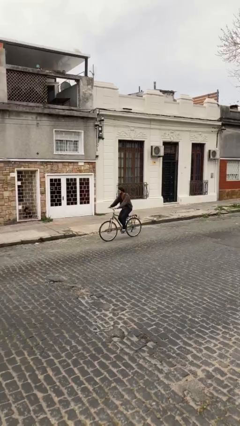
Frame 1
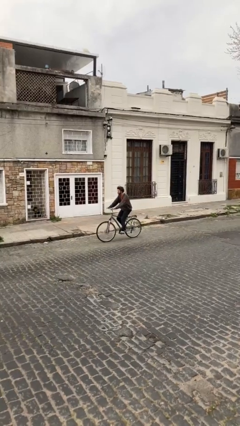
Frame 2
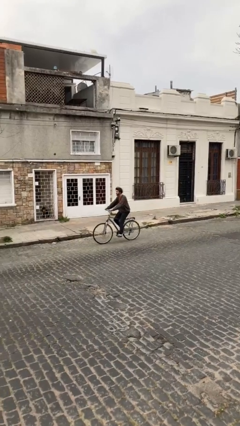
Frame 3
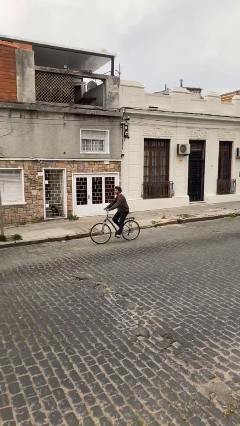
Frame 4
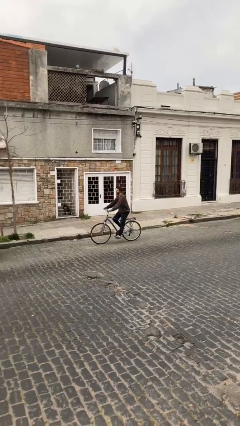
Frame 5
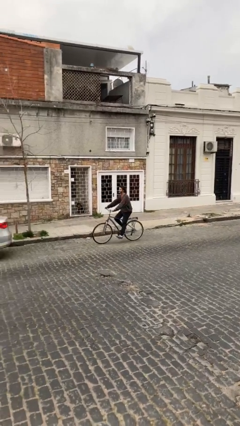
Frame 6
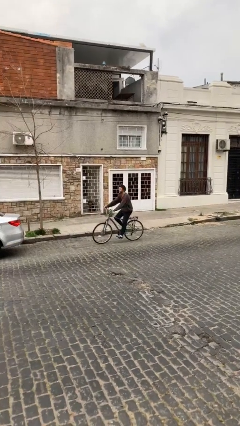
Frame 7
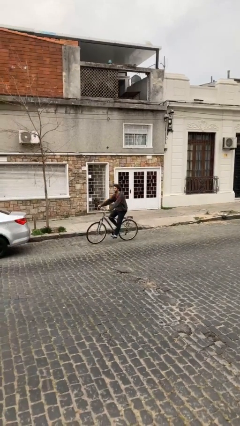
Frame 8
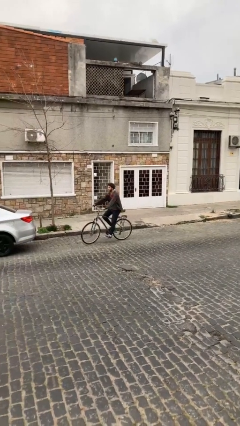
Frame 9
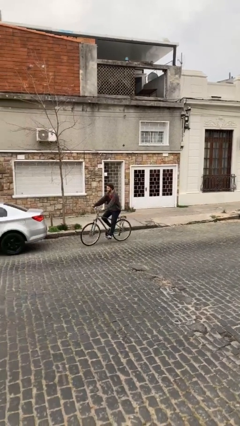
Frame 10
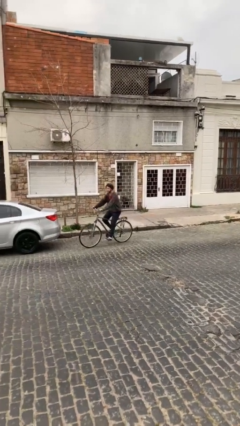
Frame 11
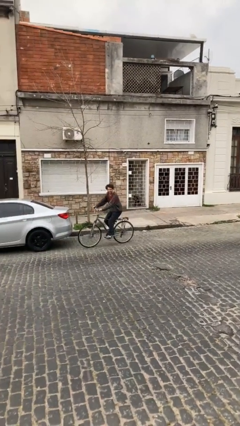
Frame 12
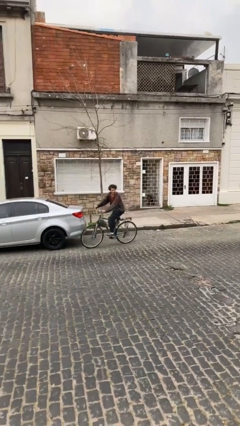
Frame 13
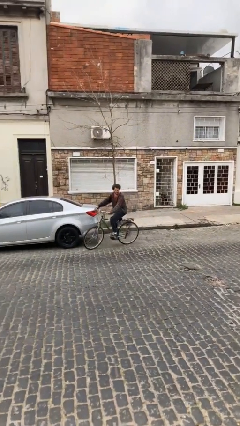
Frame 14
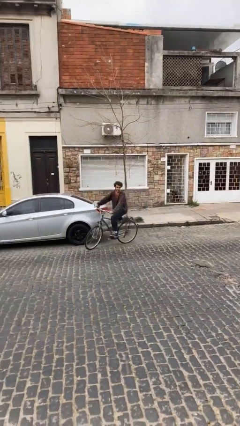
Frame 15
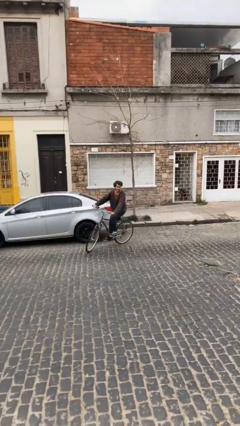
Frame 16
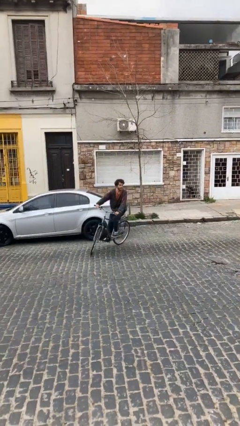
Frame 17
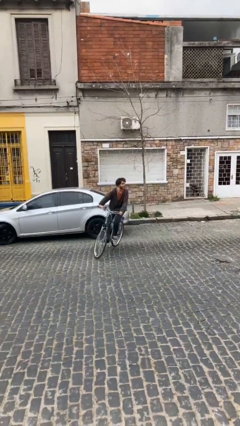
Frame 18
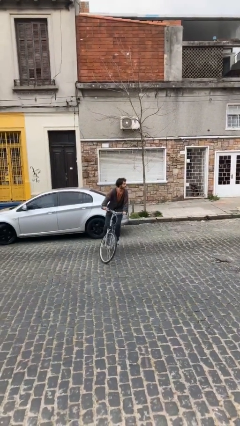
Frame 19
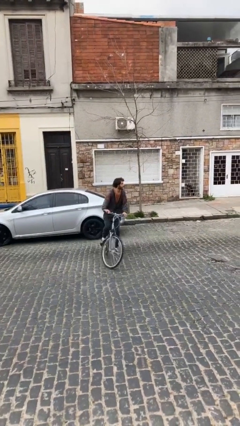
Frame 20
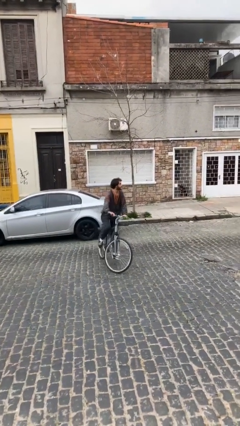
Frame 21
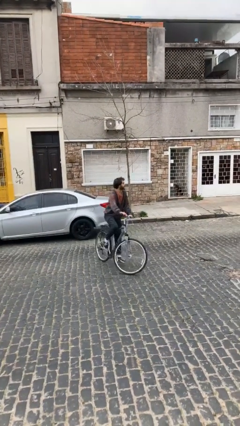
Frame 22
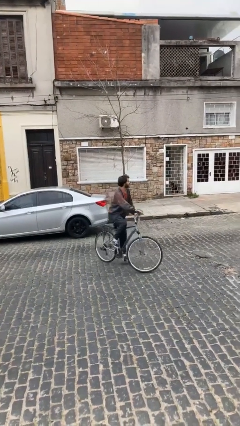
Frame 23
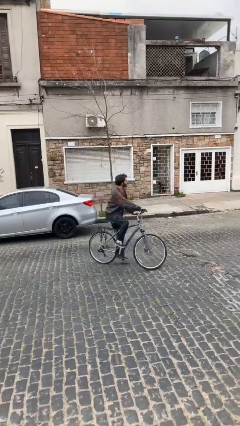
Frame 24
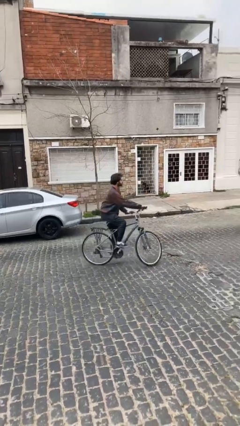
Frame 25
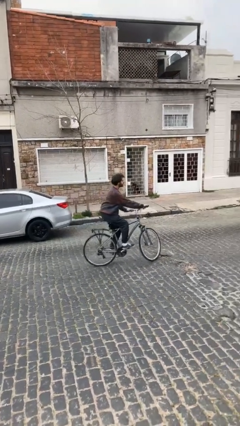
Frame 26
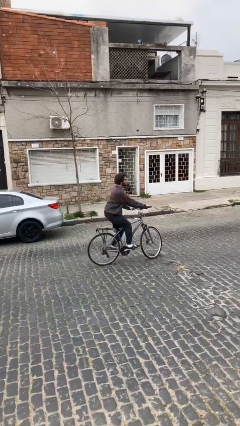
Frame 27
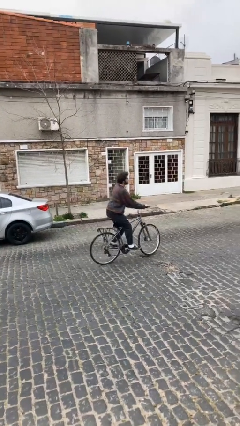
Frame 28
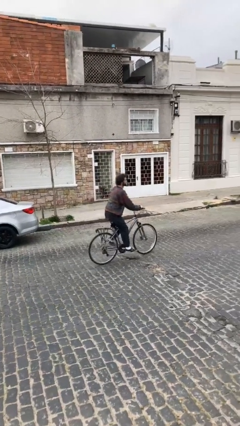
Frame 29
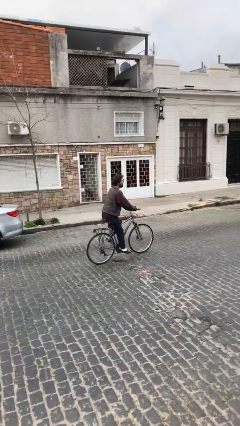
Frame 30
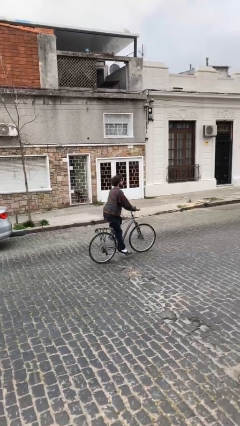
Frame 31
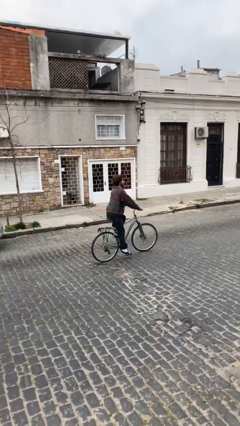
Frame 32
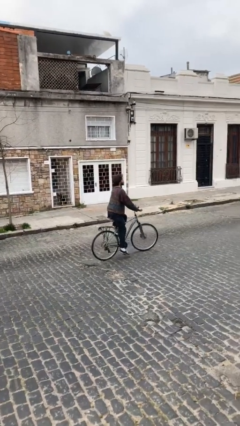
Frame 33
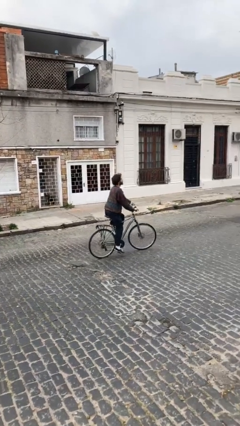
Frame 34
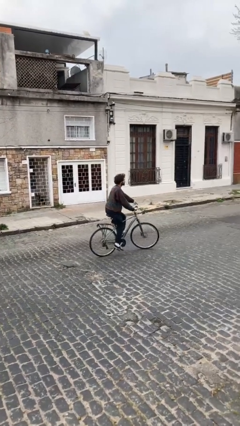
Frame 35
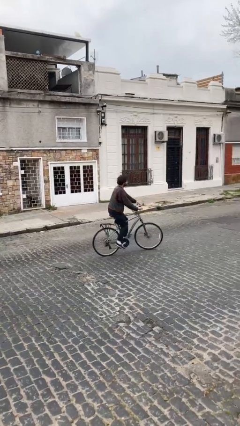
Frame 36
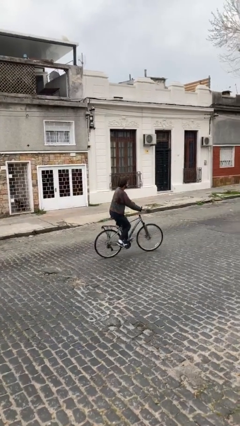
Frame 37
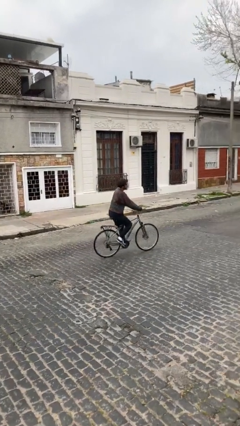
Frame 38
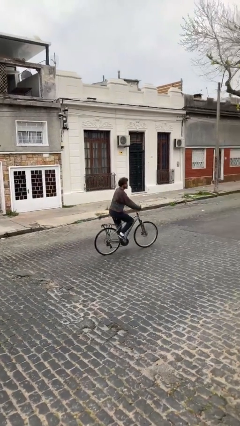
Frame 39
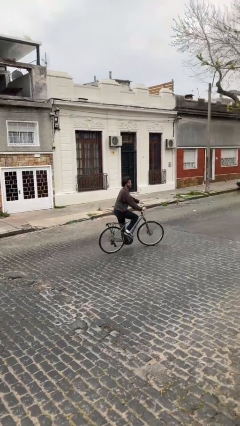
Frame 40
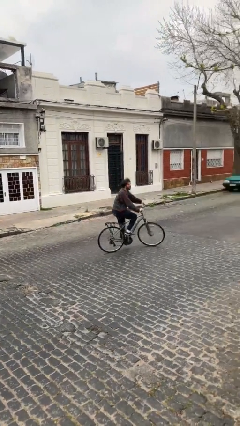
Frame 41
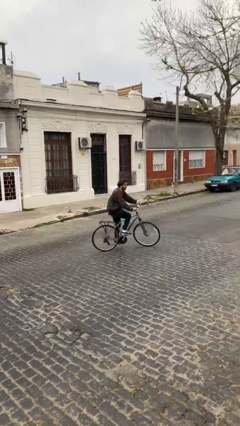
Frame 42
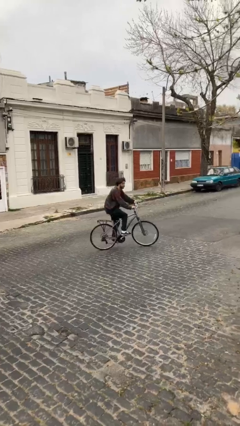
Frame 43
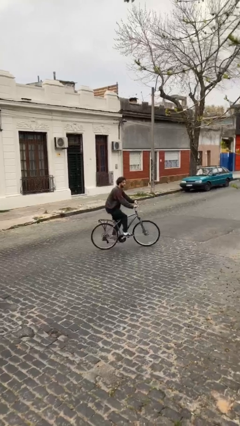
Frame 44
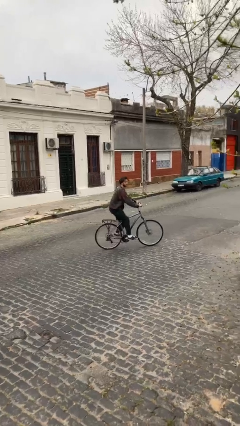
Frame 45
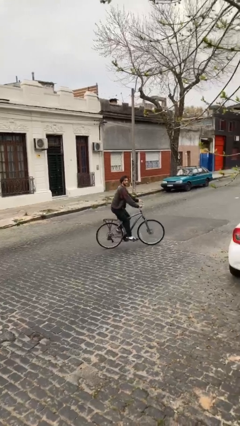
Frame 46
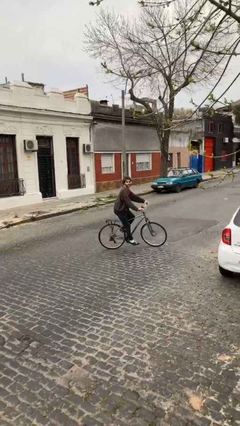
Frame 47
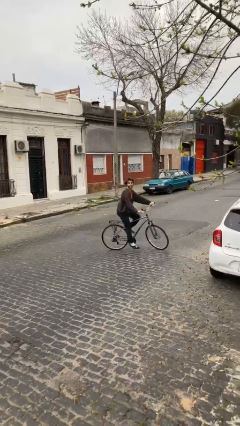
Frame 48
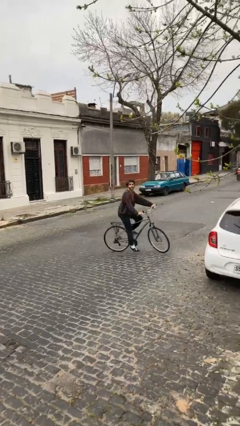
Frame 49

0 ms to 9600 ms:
person rides bicycle

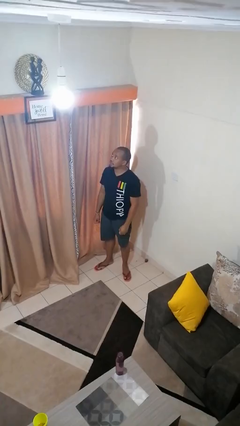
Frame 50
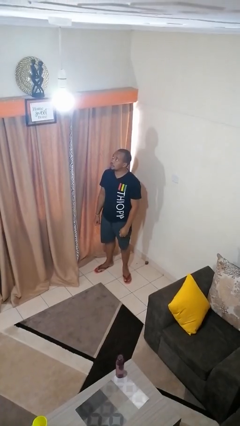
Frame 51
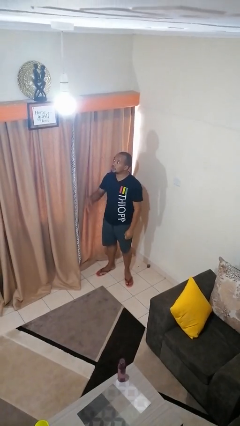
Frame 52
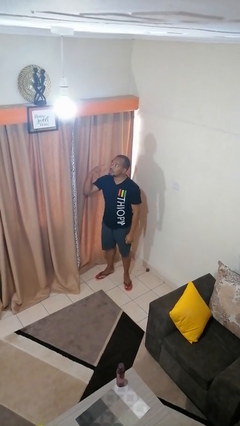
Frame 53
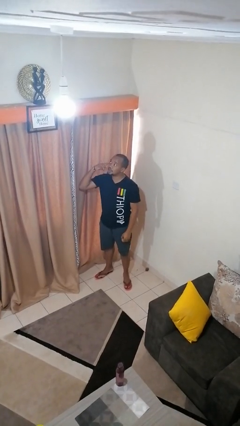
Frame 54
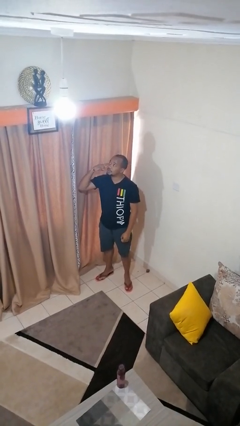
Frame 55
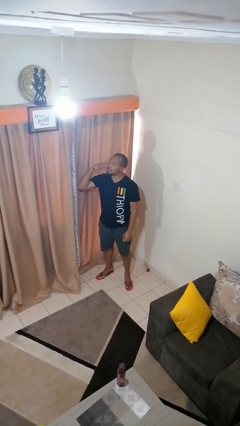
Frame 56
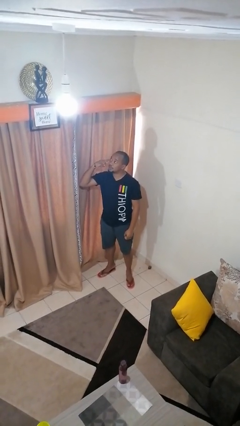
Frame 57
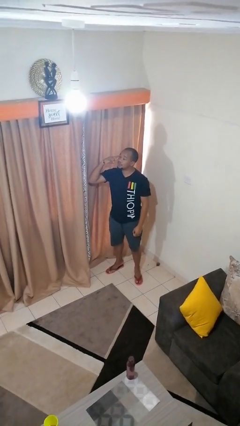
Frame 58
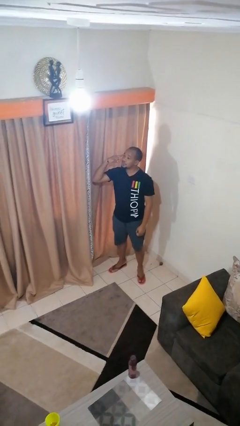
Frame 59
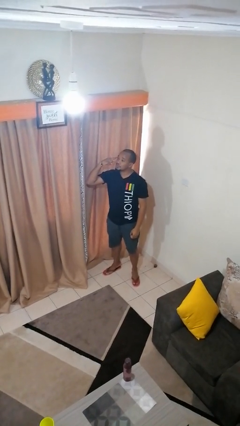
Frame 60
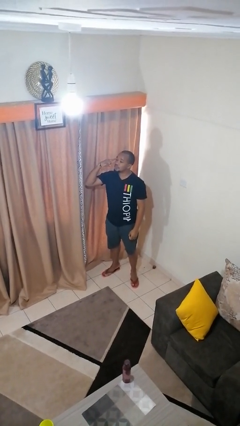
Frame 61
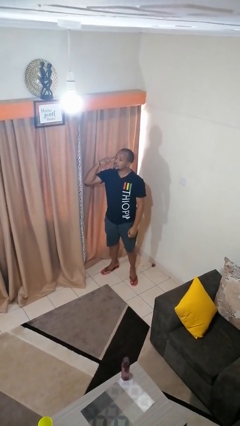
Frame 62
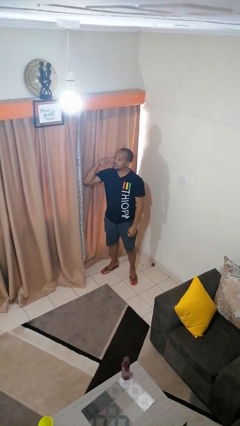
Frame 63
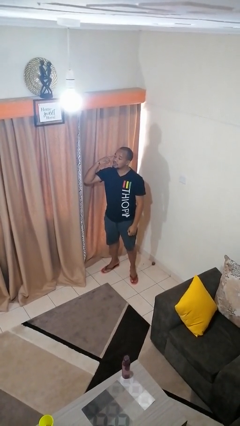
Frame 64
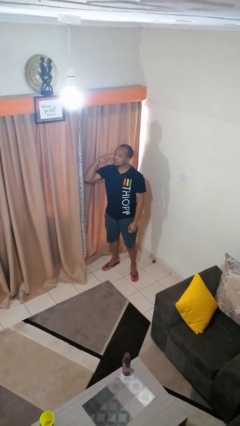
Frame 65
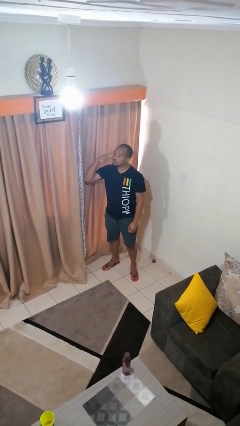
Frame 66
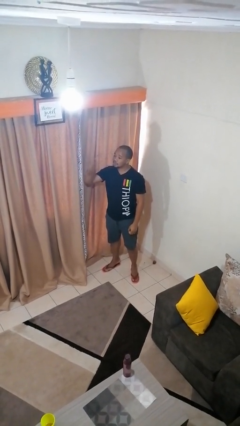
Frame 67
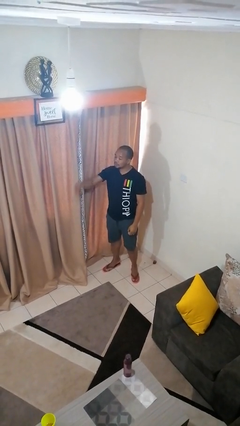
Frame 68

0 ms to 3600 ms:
person gestures call me

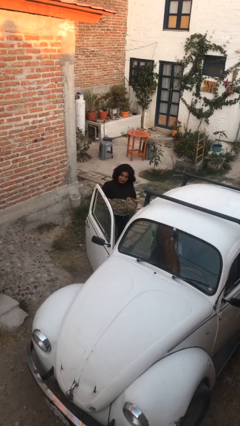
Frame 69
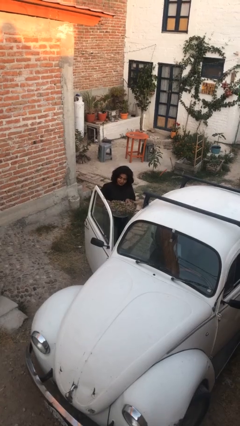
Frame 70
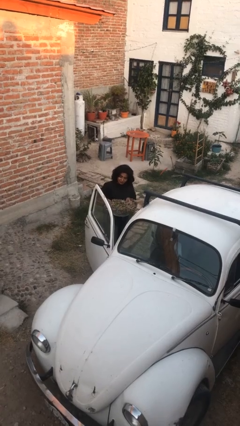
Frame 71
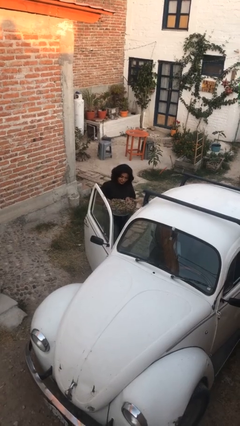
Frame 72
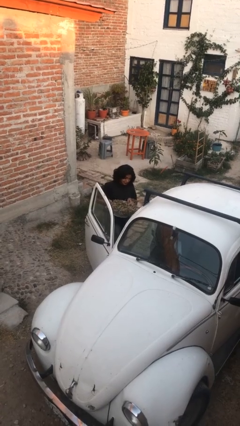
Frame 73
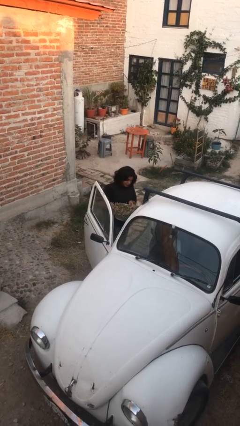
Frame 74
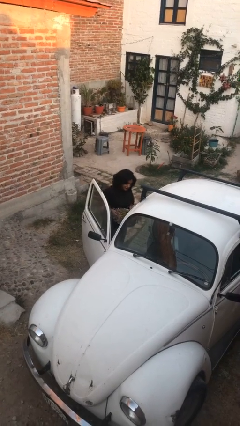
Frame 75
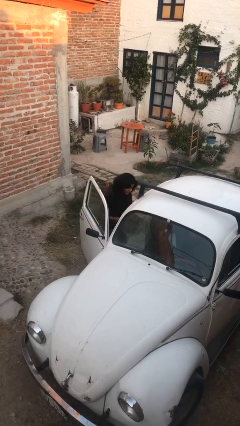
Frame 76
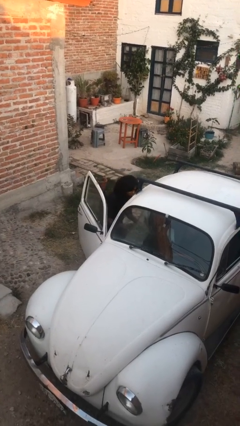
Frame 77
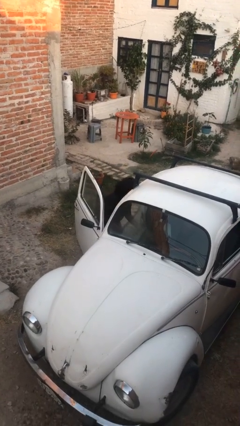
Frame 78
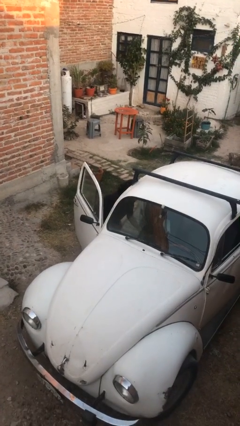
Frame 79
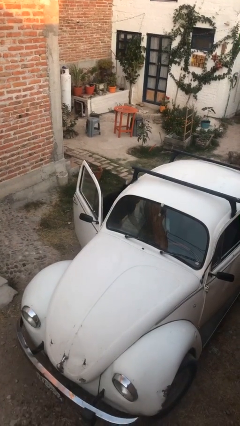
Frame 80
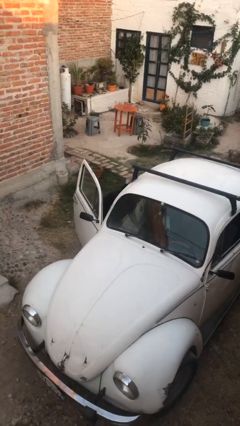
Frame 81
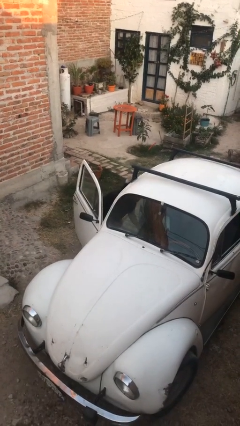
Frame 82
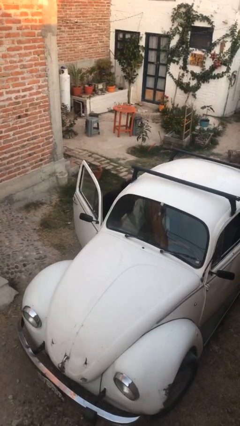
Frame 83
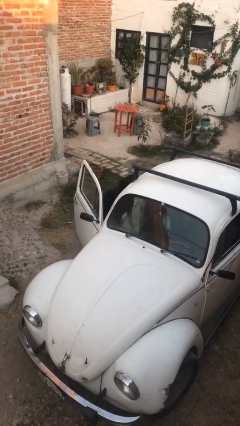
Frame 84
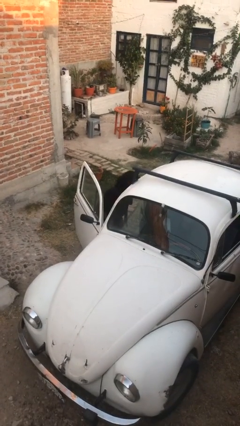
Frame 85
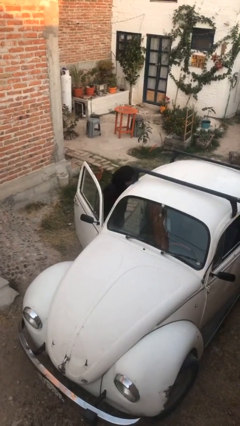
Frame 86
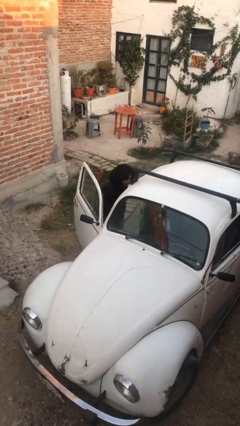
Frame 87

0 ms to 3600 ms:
person loads car

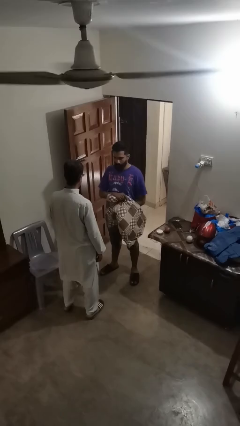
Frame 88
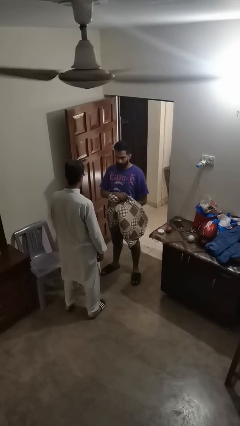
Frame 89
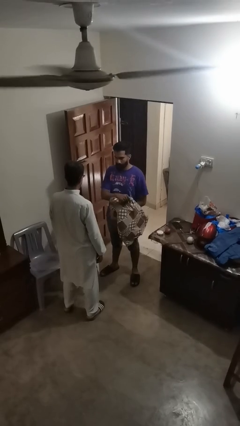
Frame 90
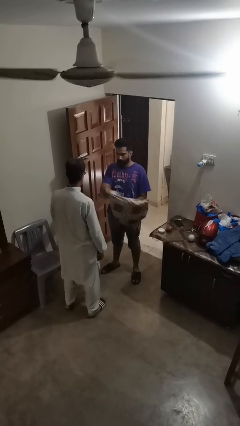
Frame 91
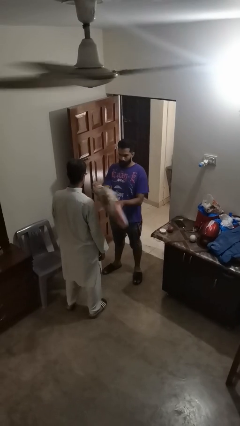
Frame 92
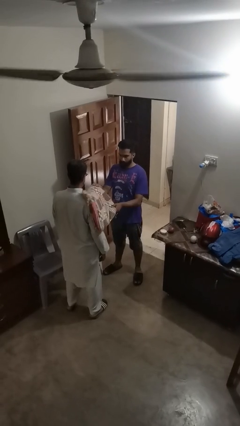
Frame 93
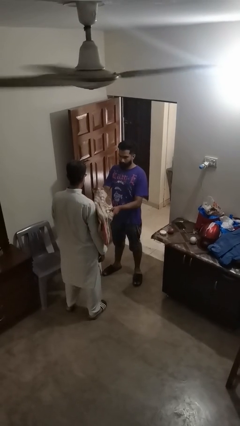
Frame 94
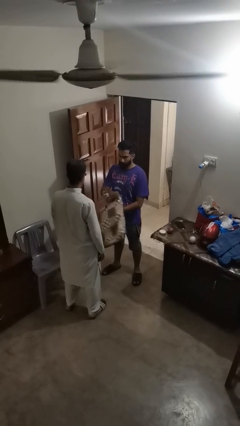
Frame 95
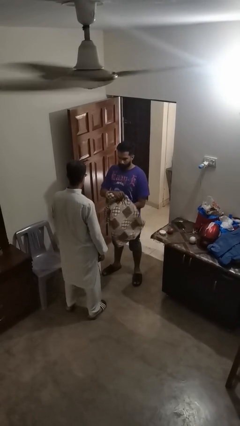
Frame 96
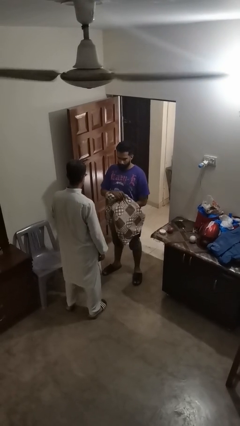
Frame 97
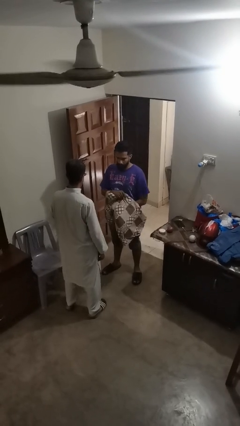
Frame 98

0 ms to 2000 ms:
person hits person with pillow
